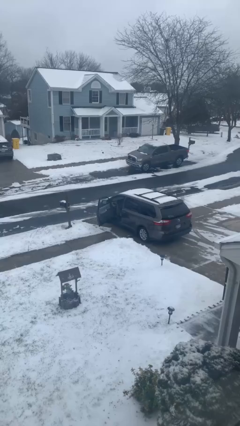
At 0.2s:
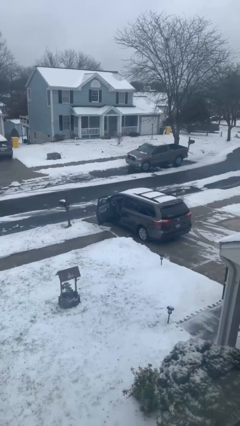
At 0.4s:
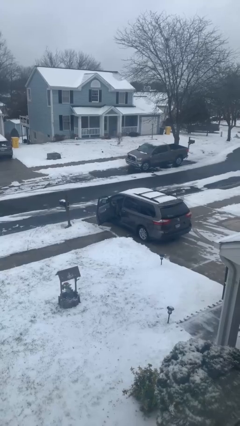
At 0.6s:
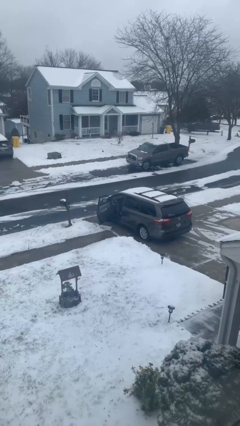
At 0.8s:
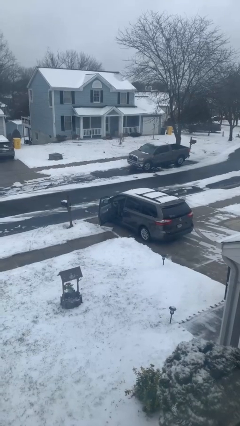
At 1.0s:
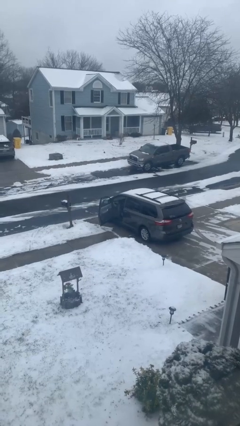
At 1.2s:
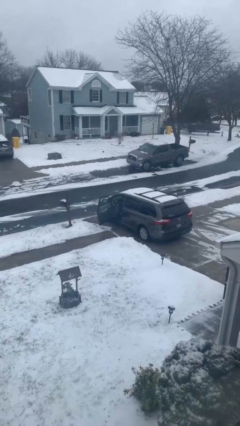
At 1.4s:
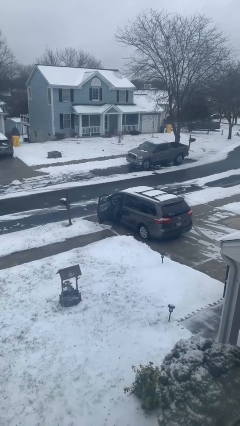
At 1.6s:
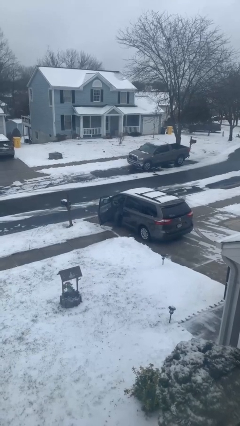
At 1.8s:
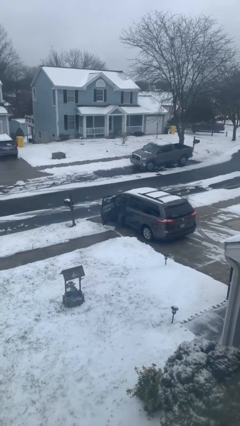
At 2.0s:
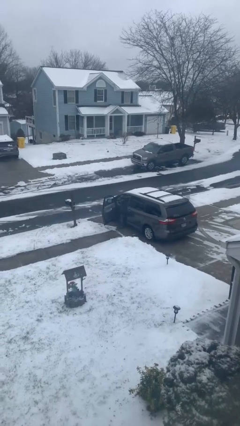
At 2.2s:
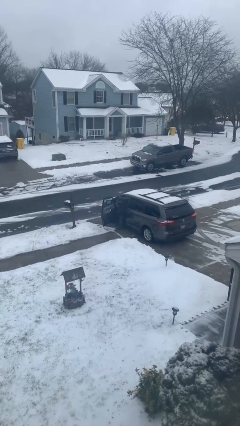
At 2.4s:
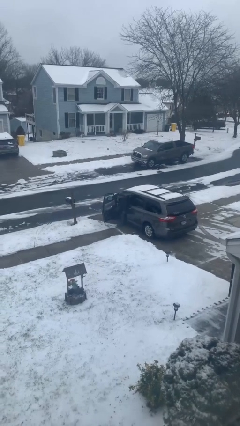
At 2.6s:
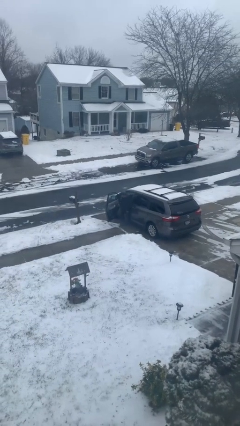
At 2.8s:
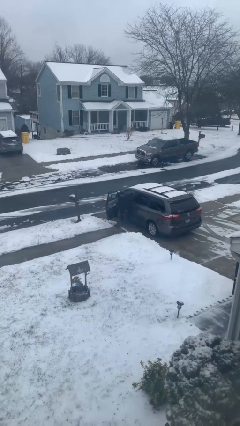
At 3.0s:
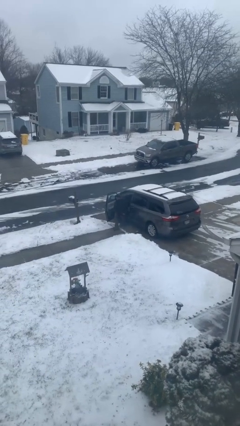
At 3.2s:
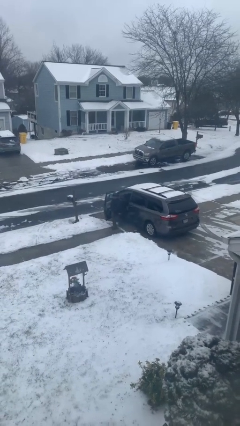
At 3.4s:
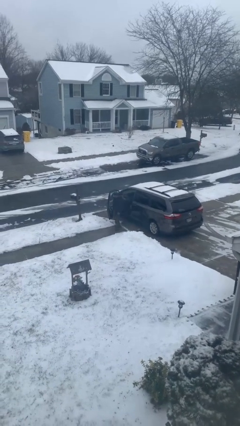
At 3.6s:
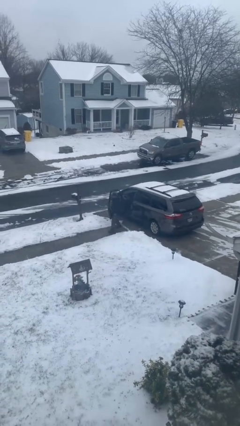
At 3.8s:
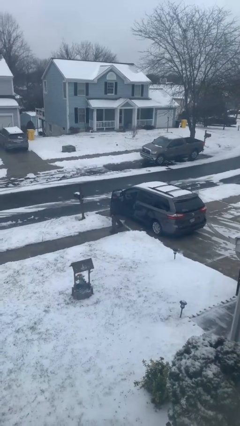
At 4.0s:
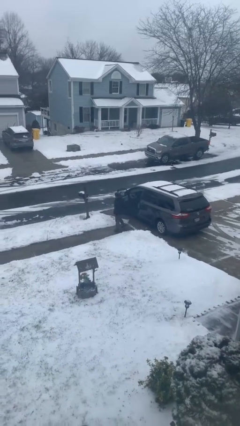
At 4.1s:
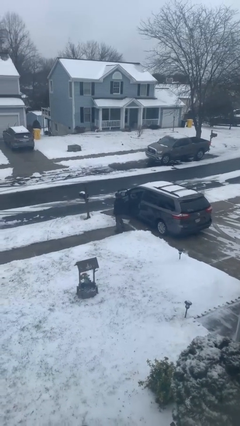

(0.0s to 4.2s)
person exits car

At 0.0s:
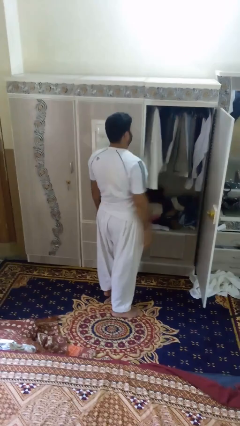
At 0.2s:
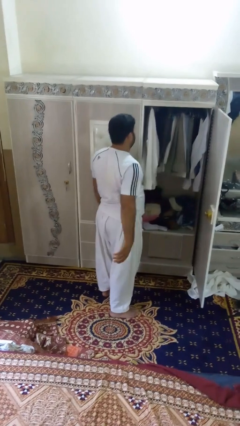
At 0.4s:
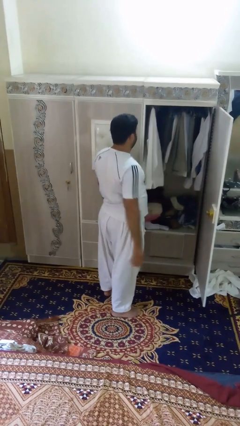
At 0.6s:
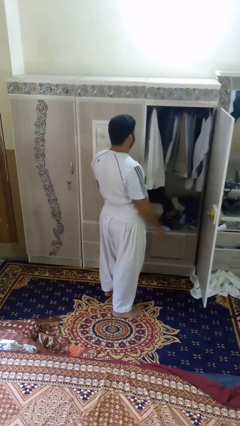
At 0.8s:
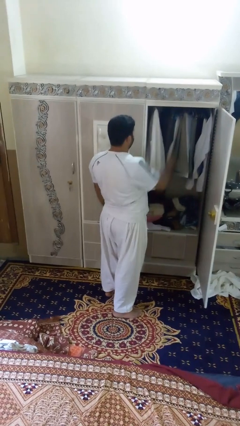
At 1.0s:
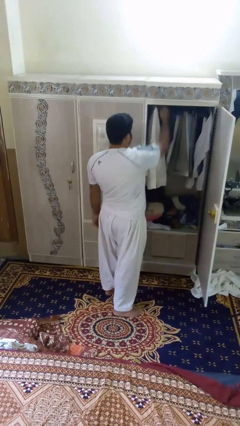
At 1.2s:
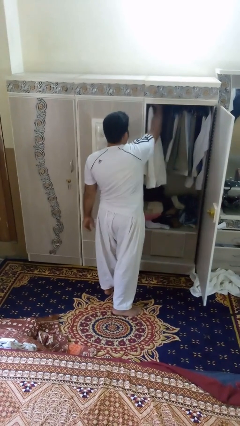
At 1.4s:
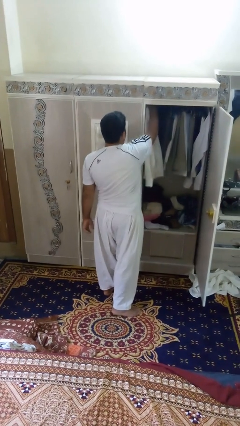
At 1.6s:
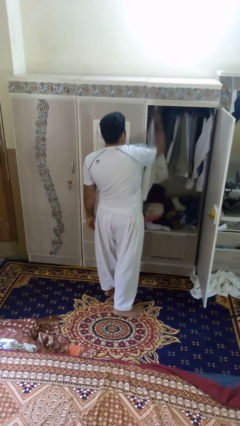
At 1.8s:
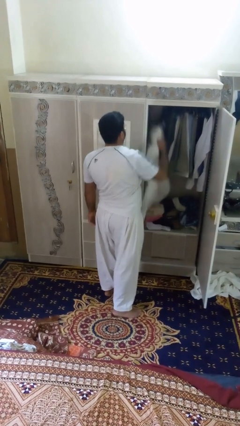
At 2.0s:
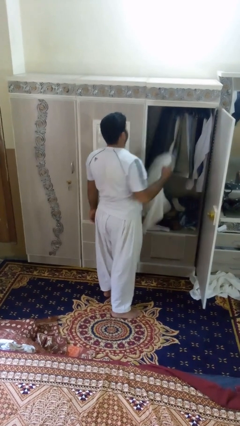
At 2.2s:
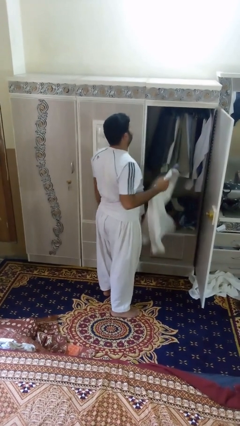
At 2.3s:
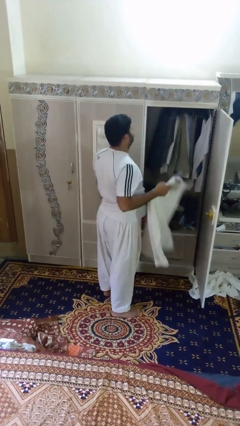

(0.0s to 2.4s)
person takes clothes from closet

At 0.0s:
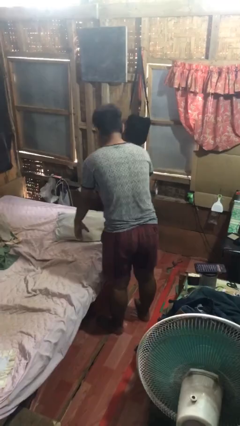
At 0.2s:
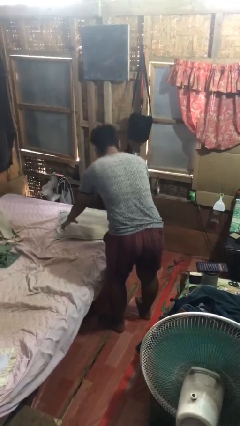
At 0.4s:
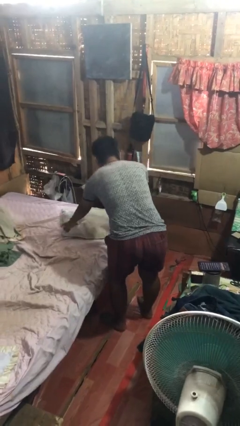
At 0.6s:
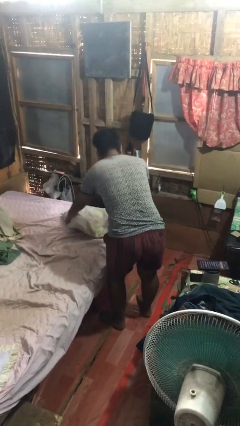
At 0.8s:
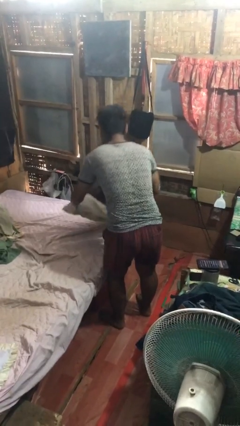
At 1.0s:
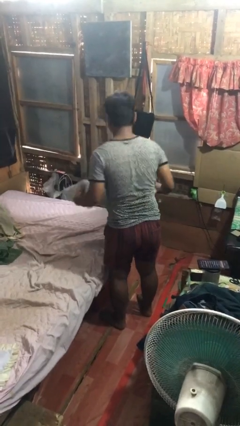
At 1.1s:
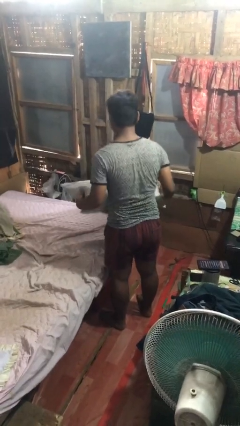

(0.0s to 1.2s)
person picks up object from bed

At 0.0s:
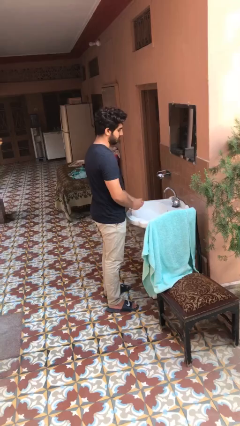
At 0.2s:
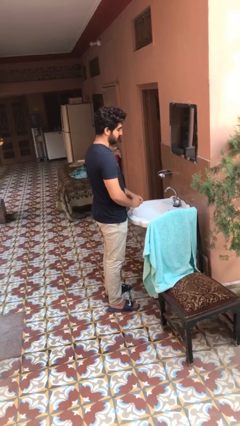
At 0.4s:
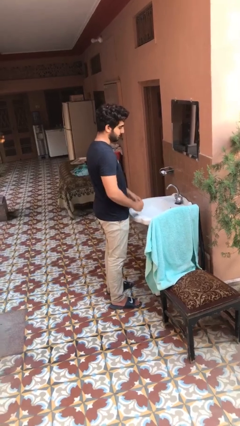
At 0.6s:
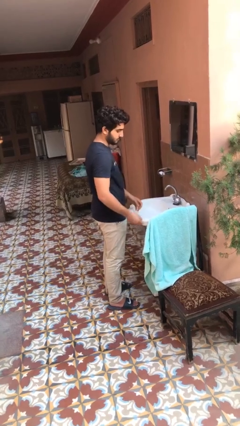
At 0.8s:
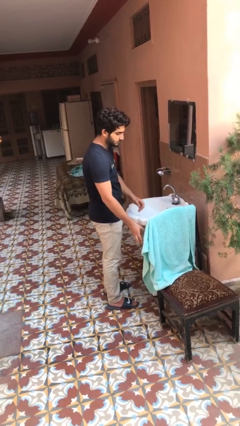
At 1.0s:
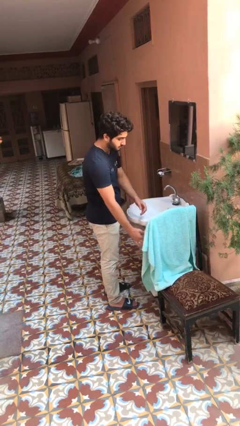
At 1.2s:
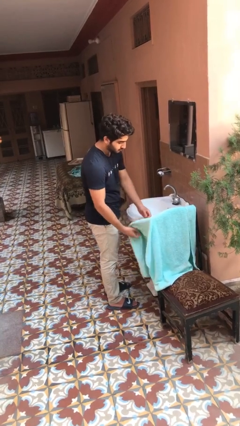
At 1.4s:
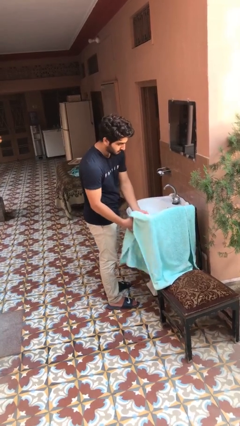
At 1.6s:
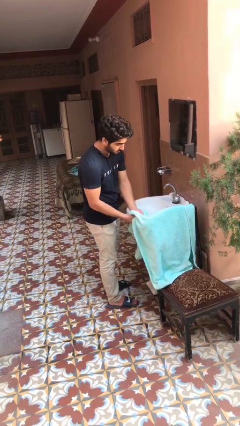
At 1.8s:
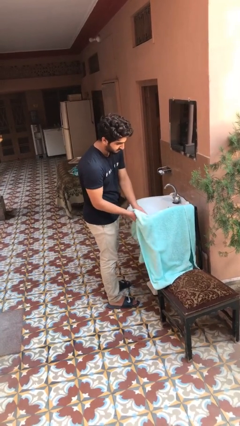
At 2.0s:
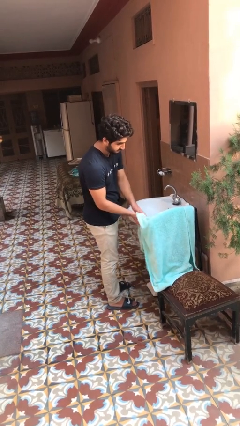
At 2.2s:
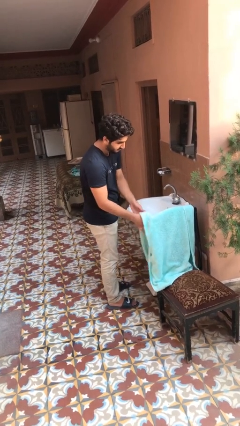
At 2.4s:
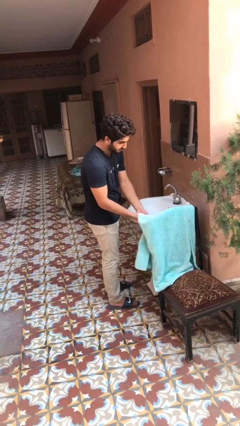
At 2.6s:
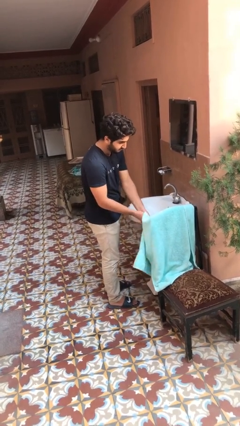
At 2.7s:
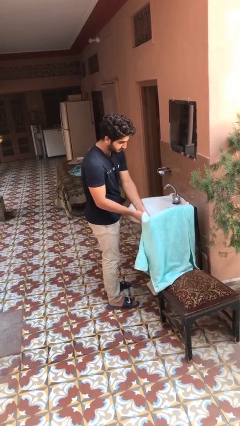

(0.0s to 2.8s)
person dries hands with towel

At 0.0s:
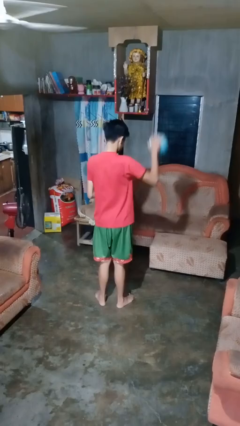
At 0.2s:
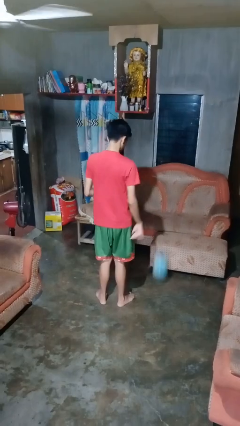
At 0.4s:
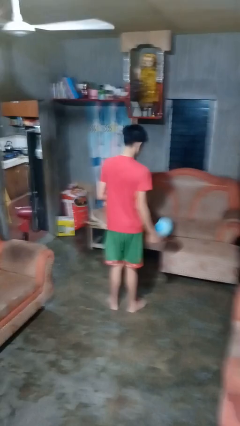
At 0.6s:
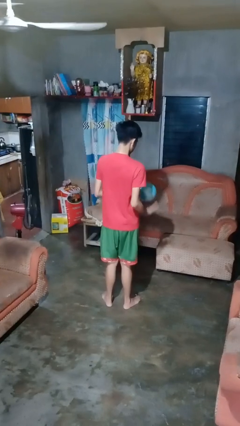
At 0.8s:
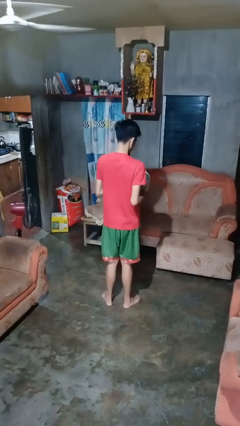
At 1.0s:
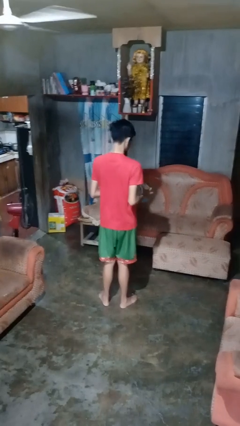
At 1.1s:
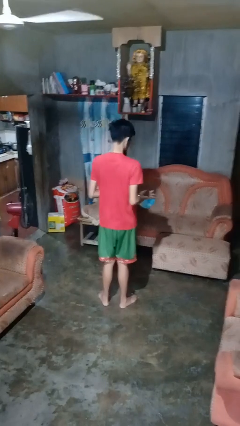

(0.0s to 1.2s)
person bounces ball on floor

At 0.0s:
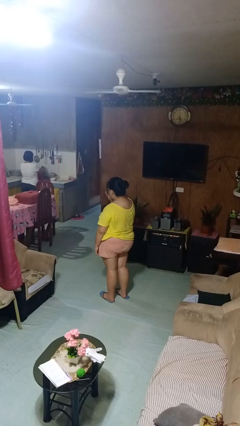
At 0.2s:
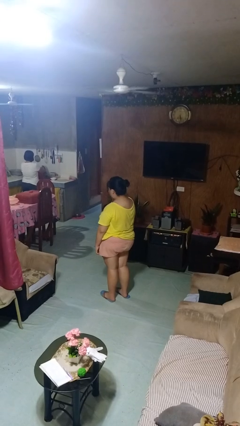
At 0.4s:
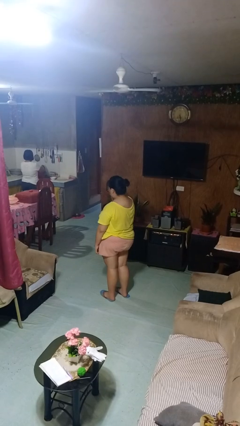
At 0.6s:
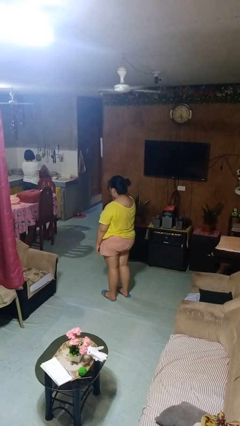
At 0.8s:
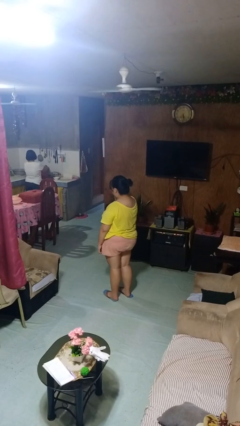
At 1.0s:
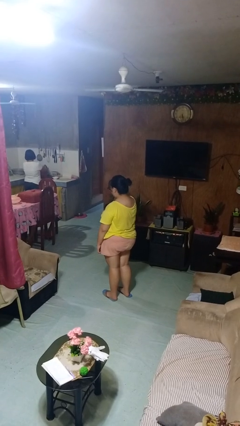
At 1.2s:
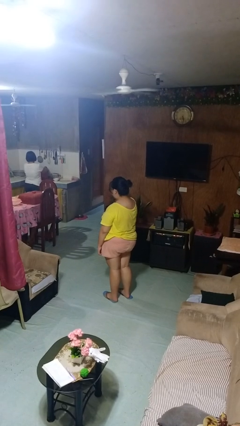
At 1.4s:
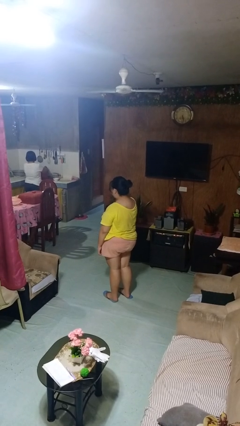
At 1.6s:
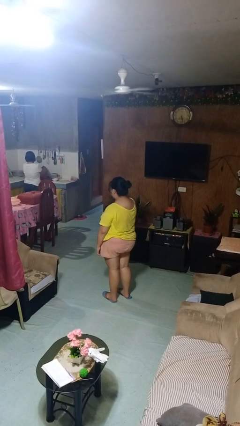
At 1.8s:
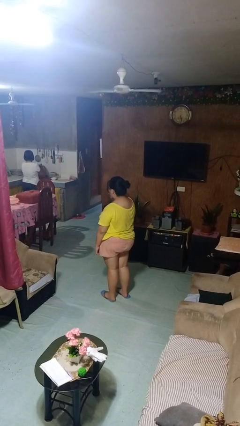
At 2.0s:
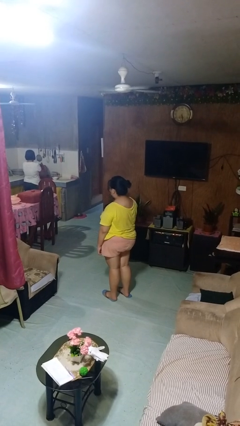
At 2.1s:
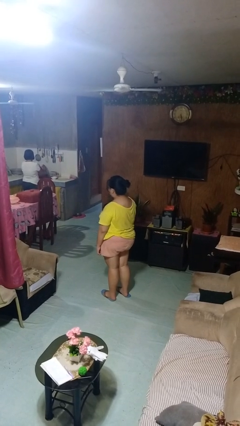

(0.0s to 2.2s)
person puts on glasses

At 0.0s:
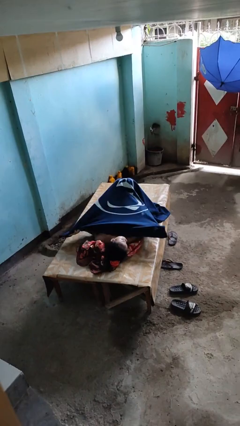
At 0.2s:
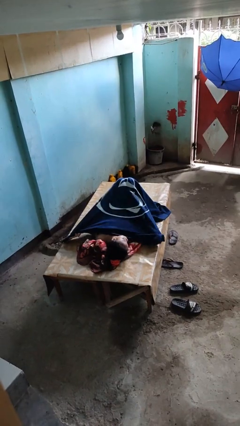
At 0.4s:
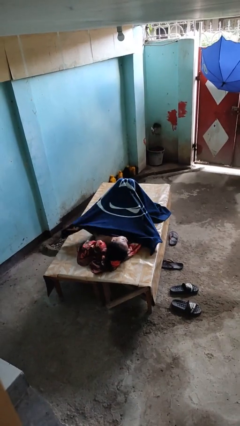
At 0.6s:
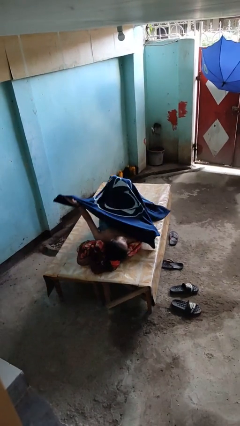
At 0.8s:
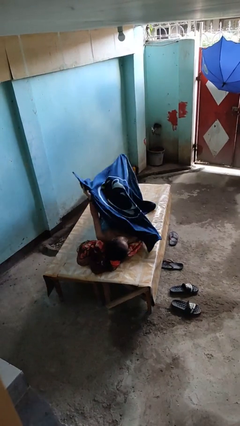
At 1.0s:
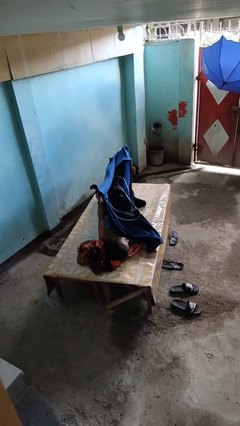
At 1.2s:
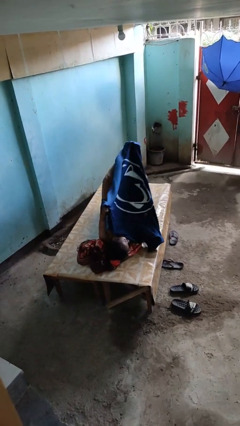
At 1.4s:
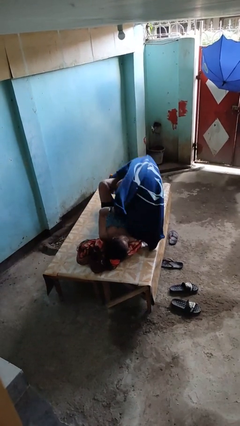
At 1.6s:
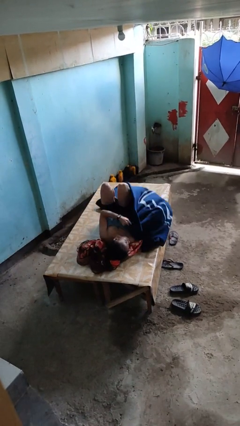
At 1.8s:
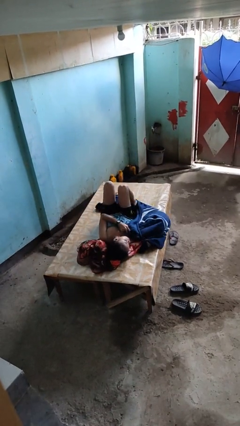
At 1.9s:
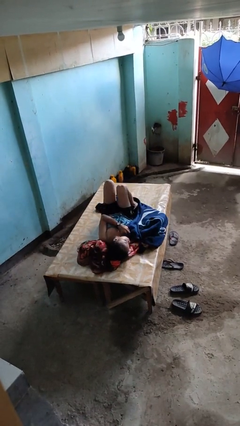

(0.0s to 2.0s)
person uncovers with bedsheets

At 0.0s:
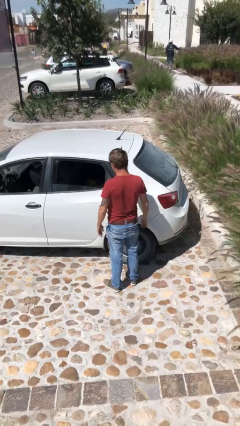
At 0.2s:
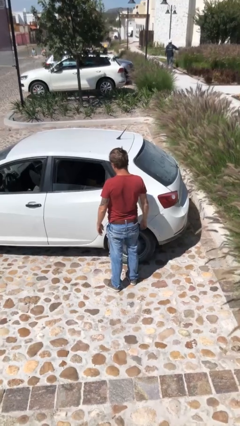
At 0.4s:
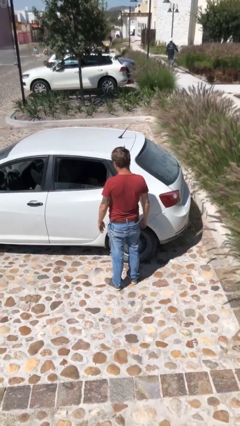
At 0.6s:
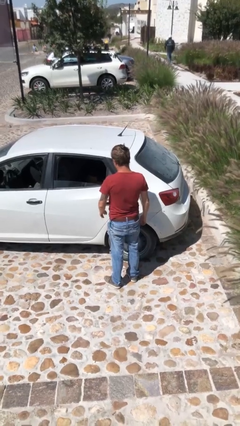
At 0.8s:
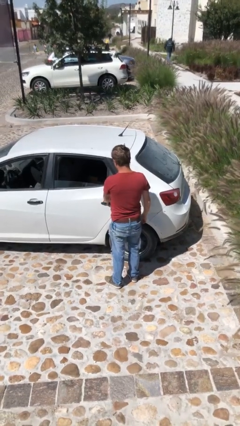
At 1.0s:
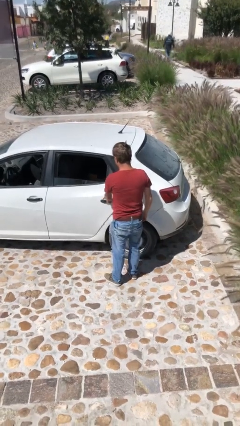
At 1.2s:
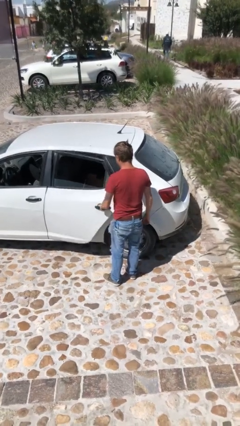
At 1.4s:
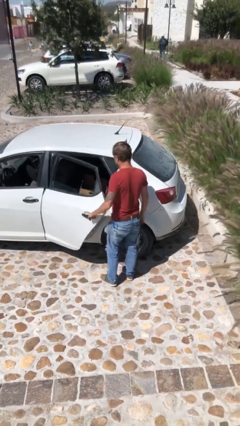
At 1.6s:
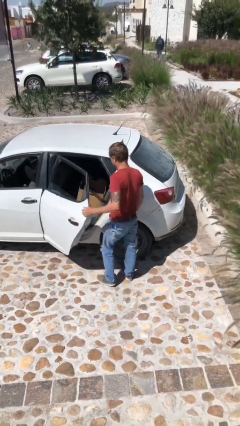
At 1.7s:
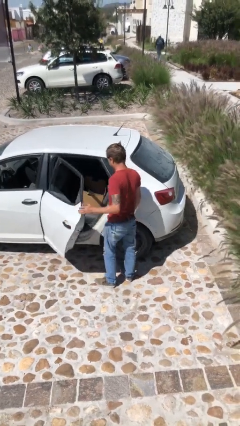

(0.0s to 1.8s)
person opens car door
